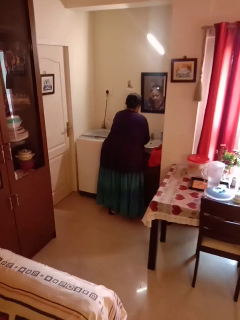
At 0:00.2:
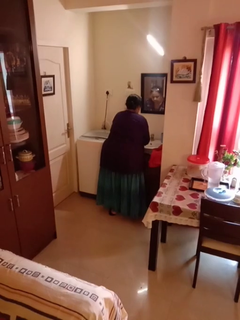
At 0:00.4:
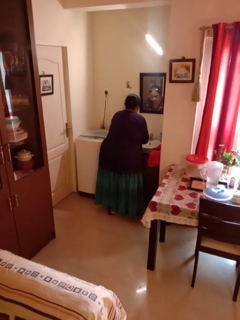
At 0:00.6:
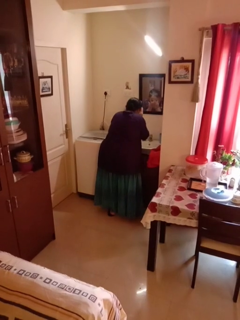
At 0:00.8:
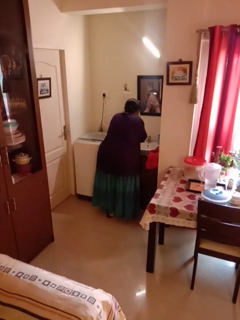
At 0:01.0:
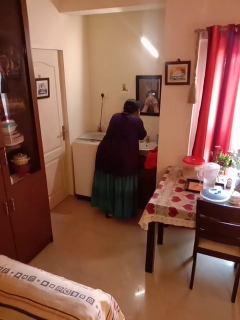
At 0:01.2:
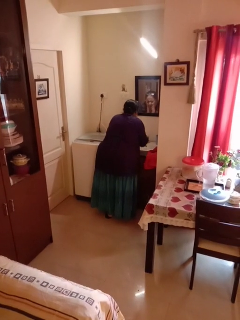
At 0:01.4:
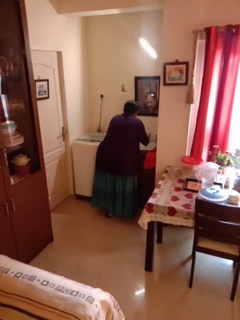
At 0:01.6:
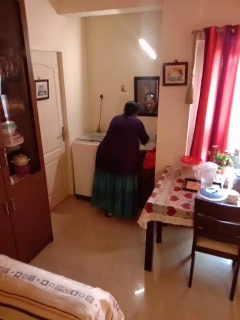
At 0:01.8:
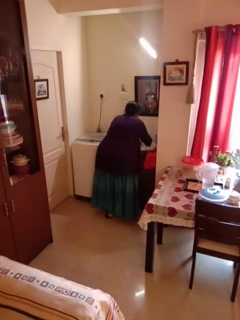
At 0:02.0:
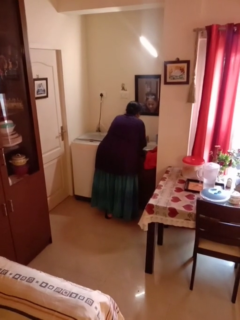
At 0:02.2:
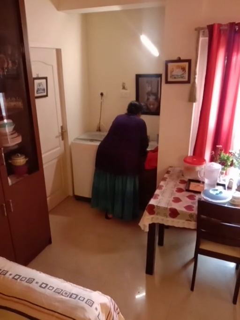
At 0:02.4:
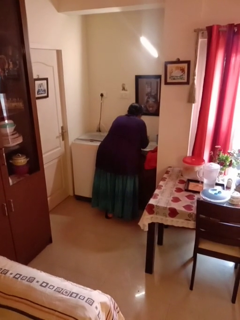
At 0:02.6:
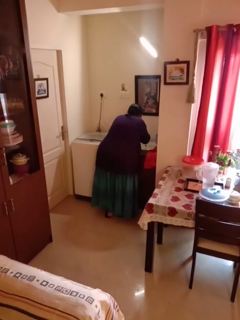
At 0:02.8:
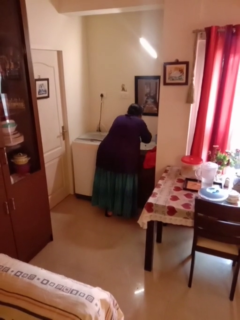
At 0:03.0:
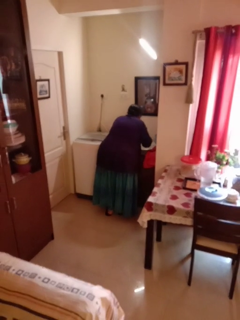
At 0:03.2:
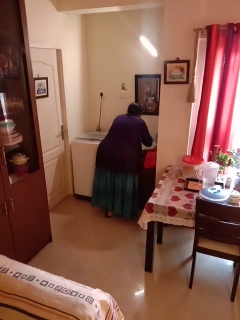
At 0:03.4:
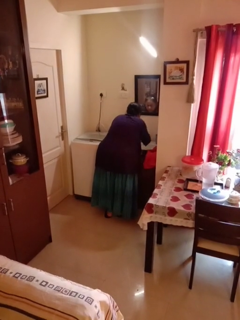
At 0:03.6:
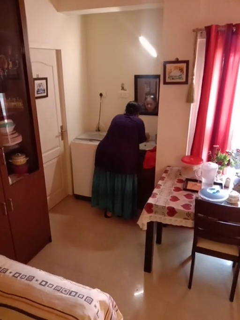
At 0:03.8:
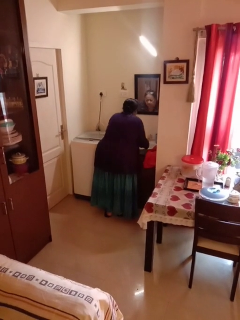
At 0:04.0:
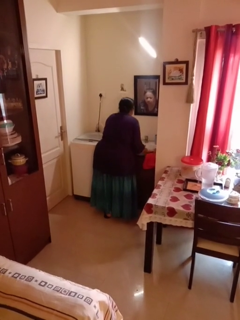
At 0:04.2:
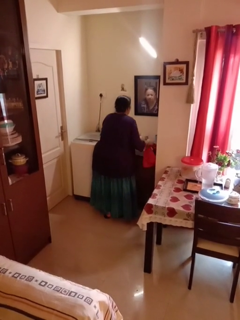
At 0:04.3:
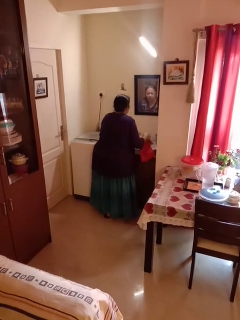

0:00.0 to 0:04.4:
person washes face

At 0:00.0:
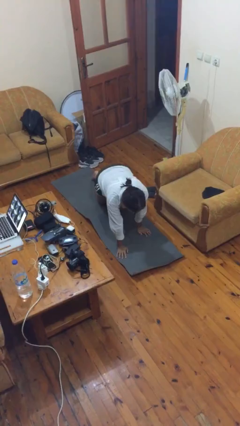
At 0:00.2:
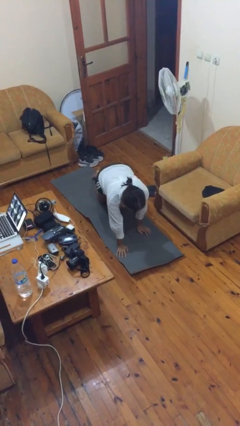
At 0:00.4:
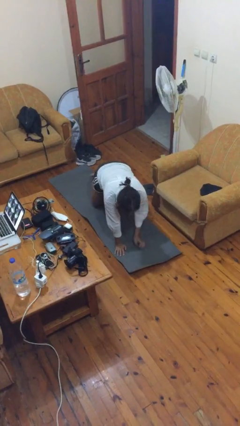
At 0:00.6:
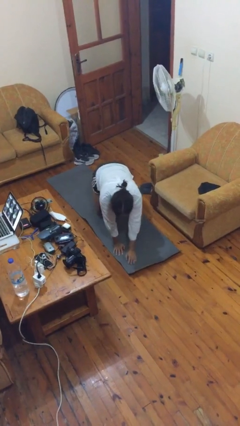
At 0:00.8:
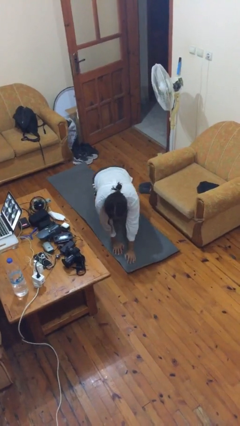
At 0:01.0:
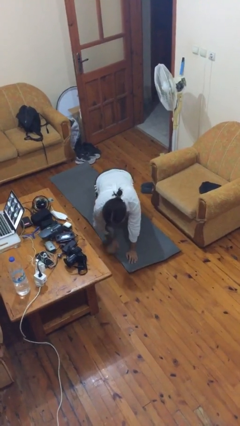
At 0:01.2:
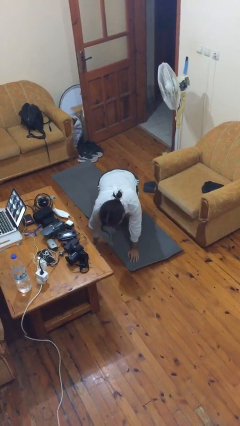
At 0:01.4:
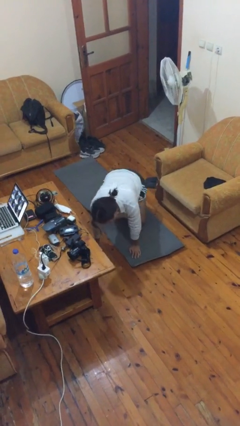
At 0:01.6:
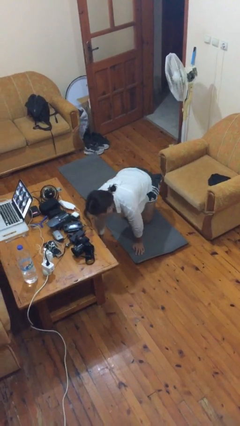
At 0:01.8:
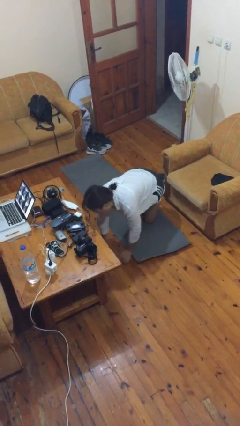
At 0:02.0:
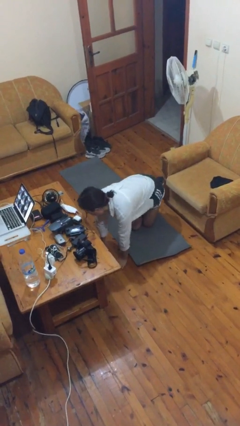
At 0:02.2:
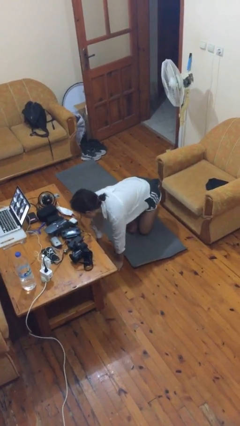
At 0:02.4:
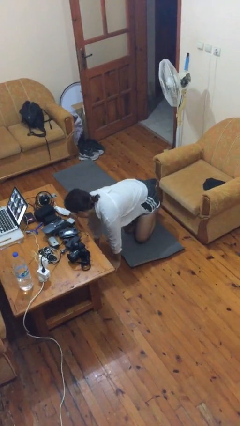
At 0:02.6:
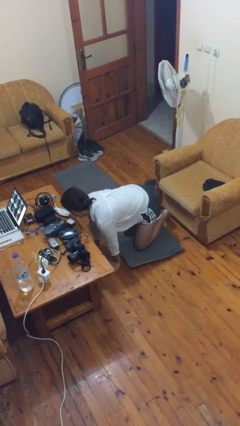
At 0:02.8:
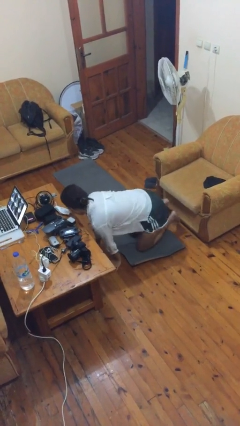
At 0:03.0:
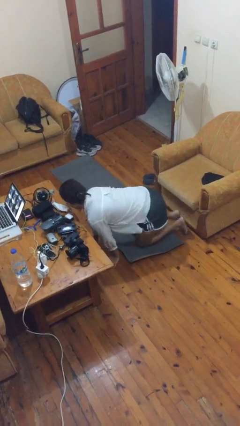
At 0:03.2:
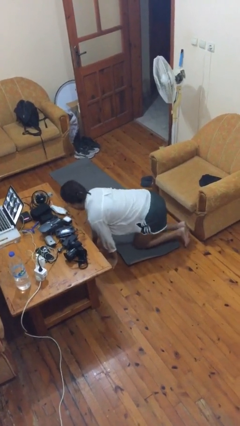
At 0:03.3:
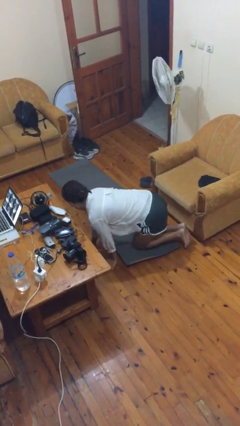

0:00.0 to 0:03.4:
person crawls

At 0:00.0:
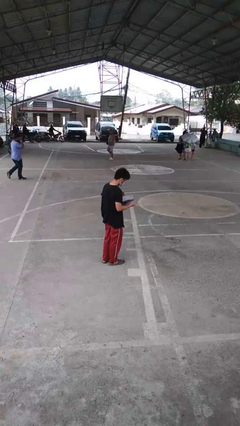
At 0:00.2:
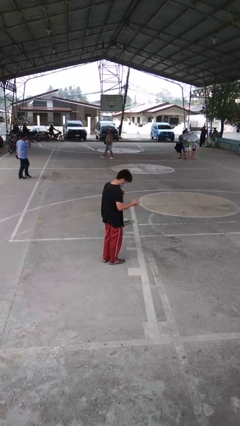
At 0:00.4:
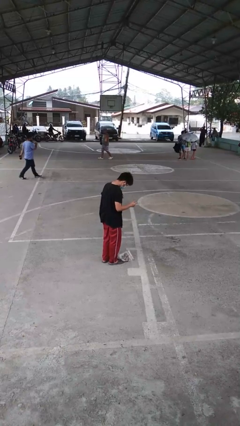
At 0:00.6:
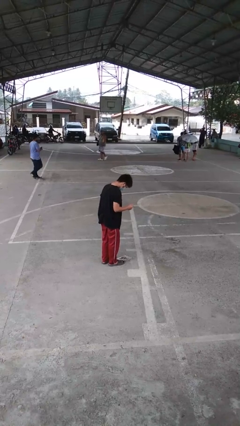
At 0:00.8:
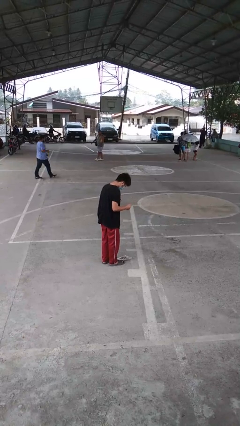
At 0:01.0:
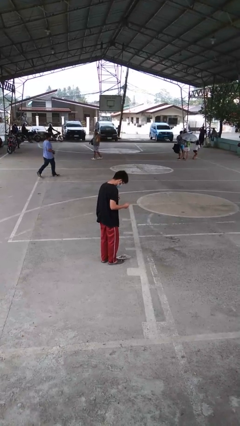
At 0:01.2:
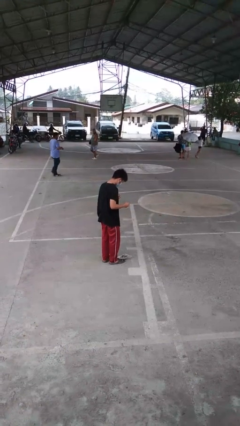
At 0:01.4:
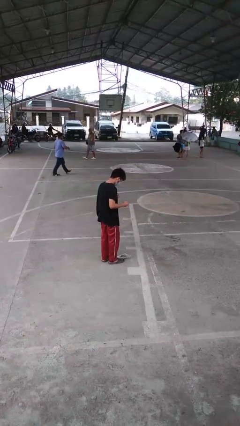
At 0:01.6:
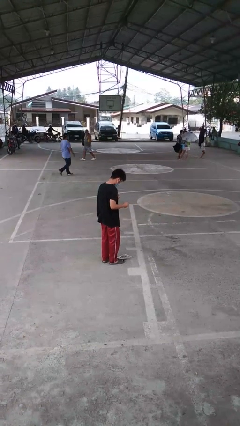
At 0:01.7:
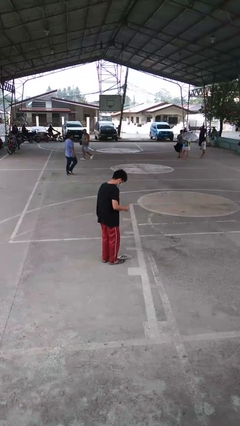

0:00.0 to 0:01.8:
person drops object

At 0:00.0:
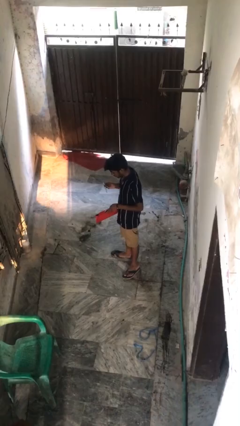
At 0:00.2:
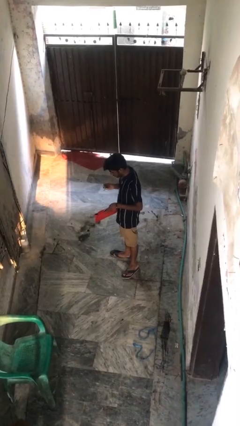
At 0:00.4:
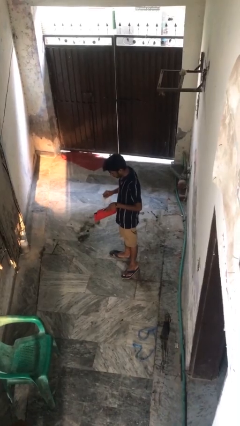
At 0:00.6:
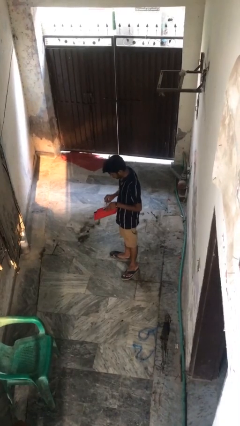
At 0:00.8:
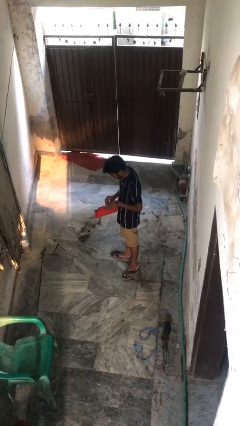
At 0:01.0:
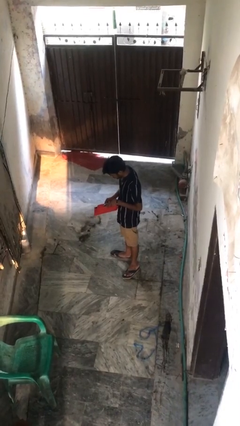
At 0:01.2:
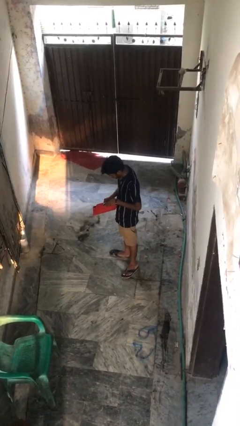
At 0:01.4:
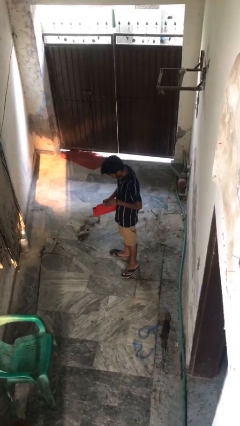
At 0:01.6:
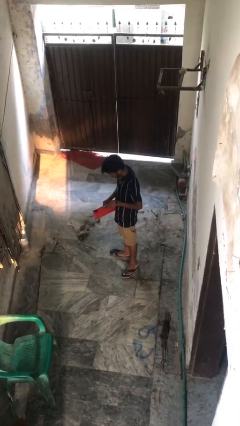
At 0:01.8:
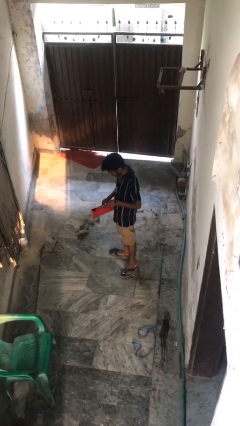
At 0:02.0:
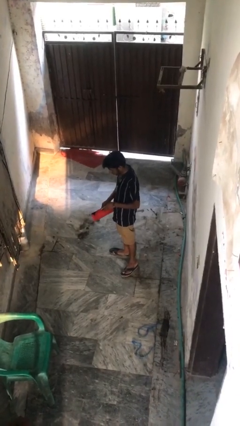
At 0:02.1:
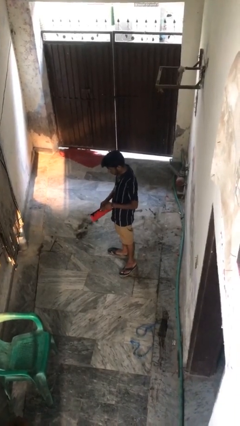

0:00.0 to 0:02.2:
person puts object into purse

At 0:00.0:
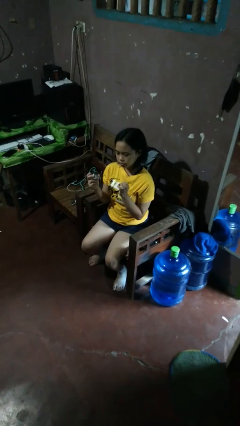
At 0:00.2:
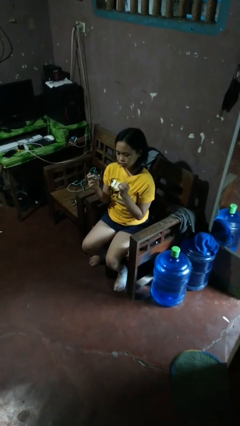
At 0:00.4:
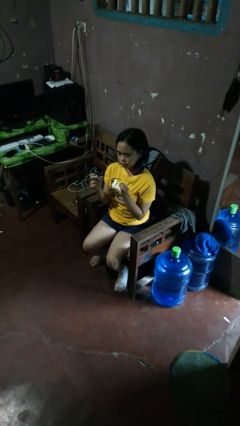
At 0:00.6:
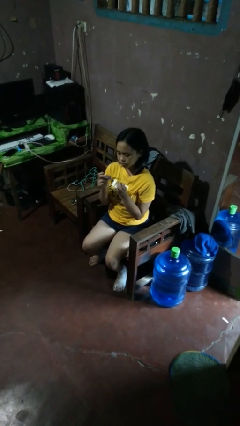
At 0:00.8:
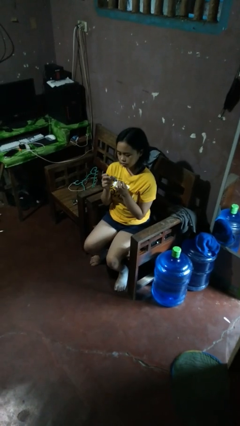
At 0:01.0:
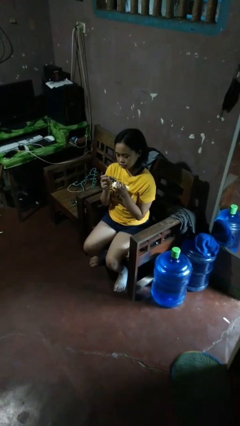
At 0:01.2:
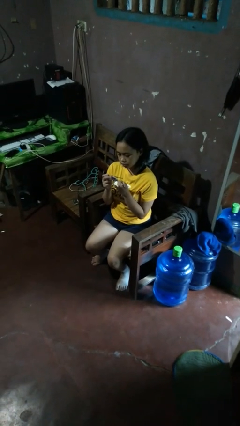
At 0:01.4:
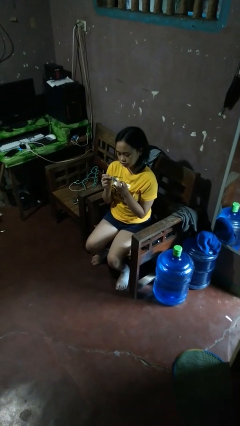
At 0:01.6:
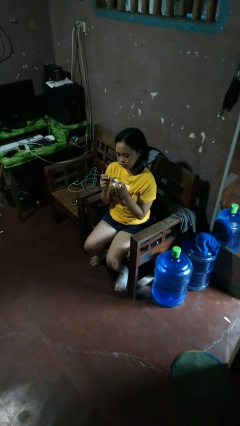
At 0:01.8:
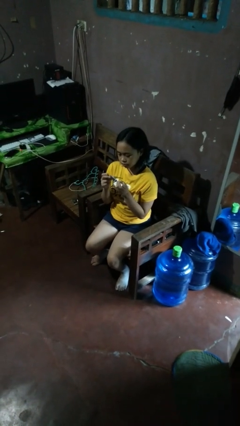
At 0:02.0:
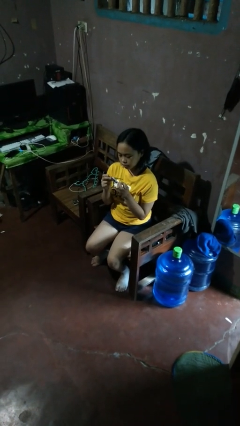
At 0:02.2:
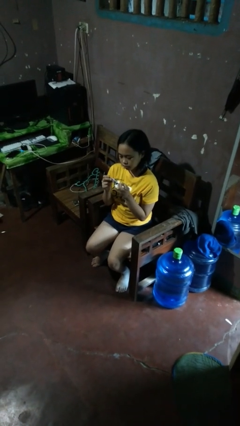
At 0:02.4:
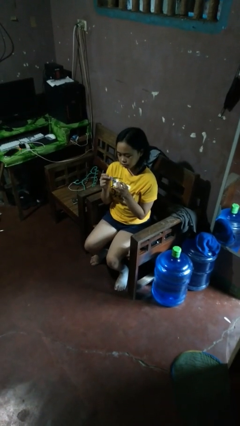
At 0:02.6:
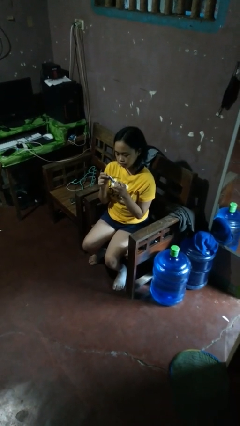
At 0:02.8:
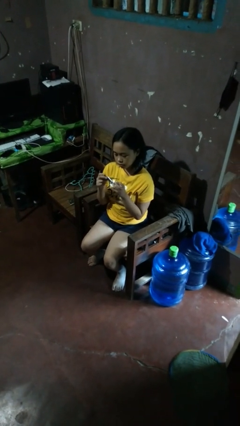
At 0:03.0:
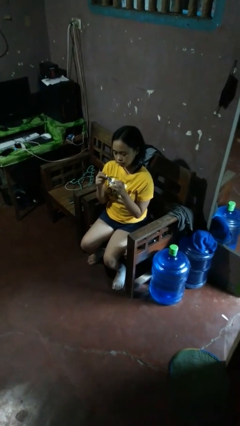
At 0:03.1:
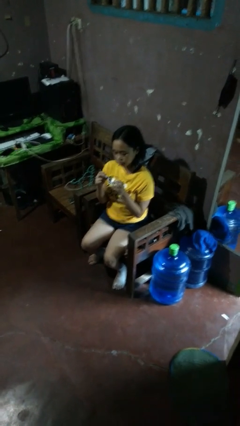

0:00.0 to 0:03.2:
person clips fingernails

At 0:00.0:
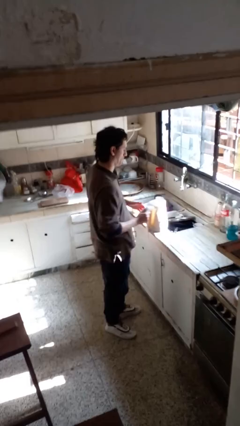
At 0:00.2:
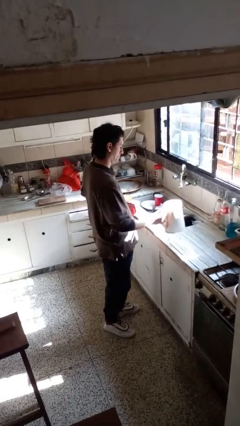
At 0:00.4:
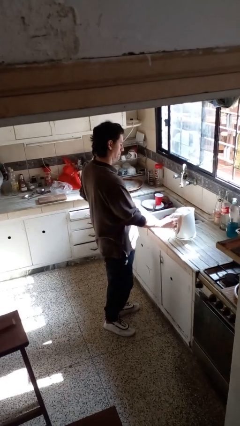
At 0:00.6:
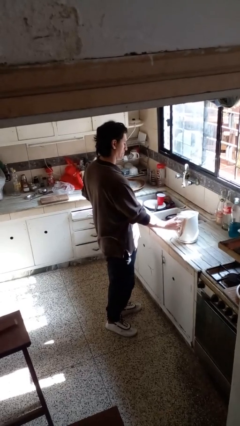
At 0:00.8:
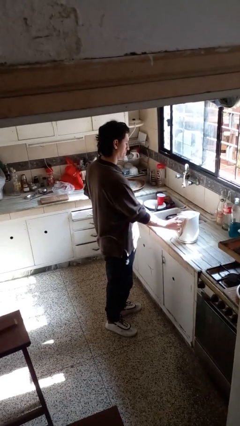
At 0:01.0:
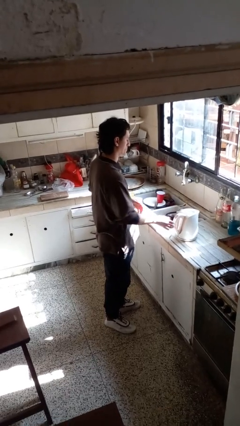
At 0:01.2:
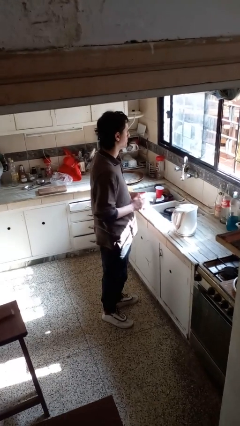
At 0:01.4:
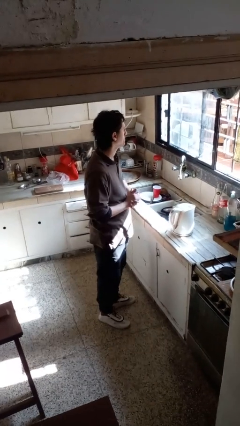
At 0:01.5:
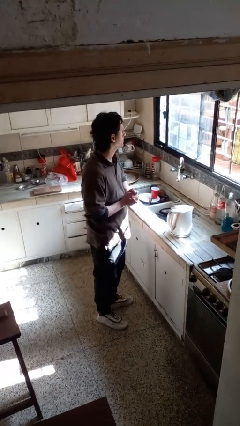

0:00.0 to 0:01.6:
person puts down object on countertop

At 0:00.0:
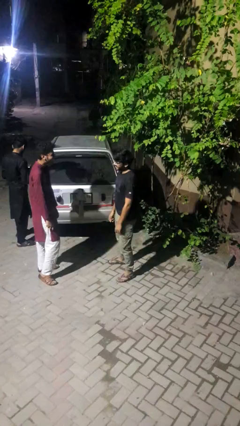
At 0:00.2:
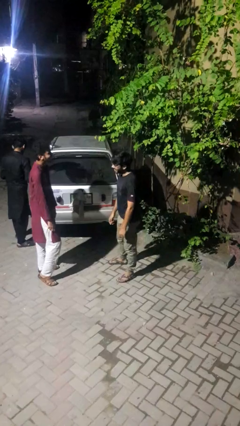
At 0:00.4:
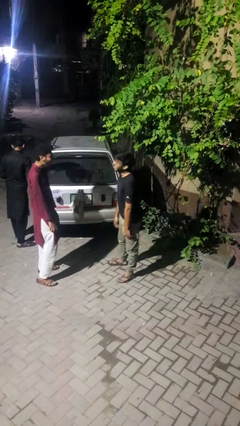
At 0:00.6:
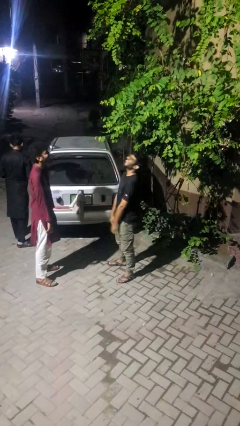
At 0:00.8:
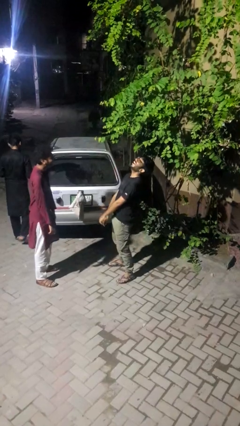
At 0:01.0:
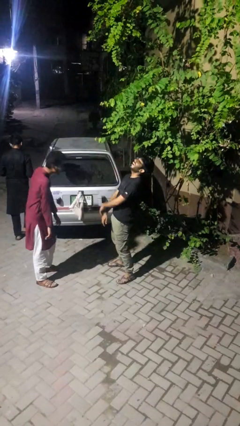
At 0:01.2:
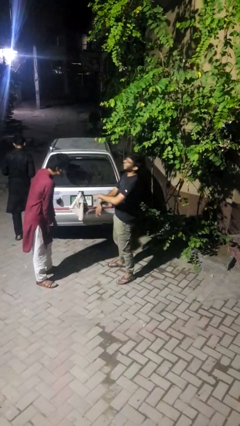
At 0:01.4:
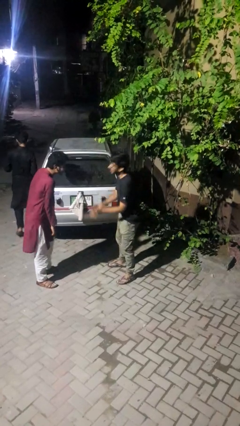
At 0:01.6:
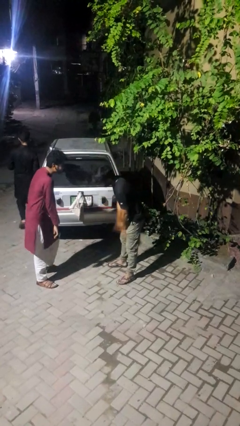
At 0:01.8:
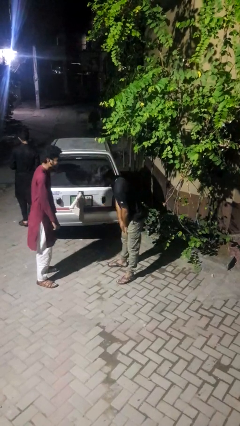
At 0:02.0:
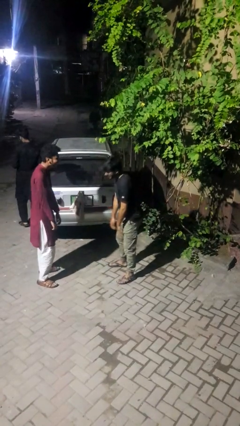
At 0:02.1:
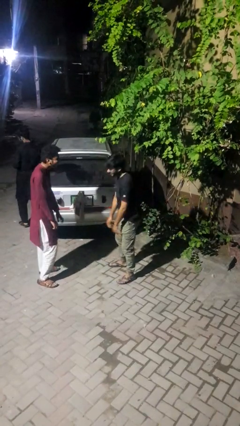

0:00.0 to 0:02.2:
person laughs with person
